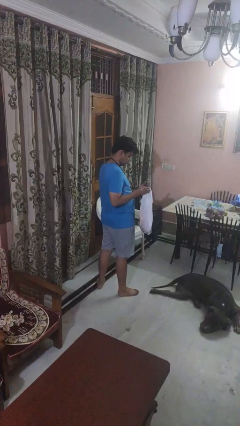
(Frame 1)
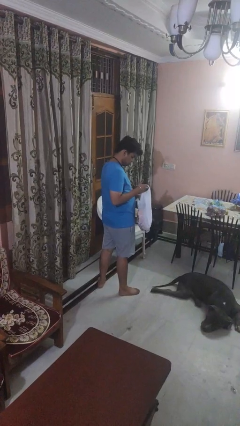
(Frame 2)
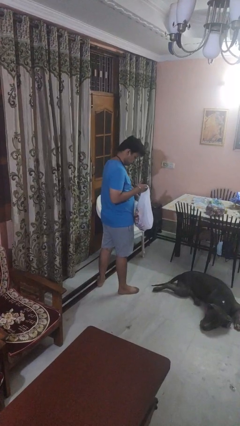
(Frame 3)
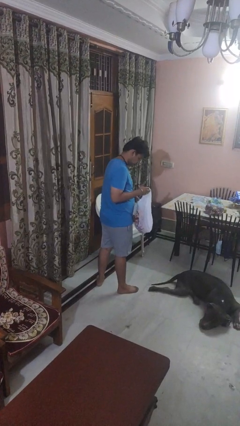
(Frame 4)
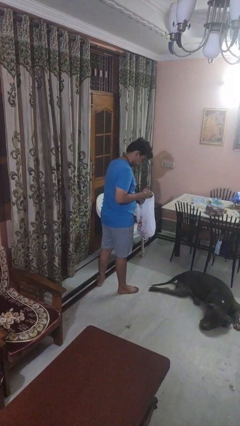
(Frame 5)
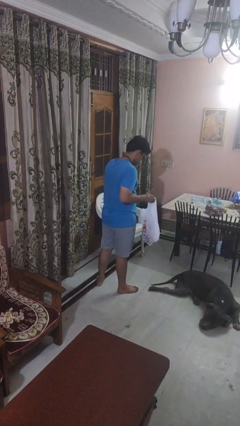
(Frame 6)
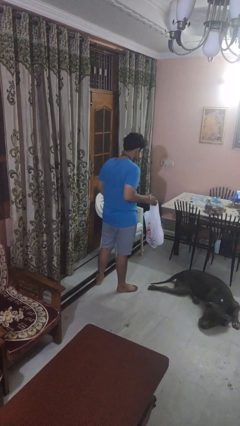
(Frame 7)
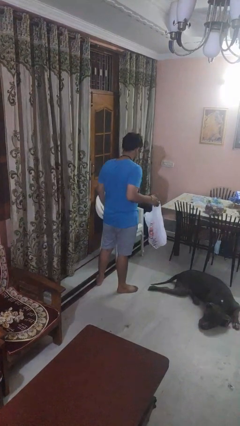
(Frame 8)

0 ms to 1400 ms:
person puts object into bag

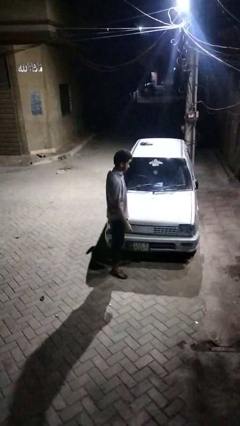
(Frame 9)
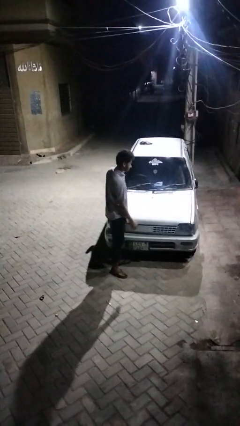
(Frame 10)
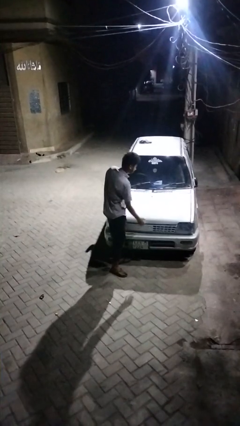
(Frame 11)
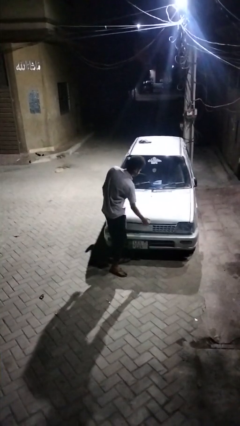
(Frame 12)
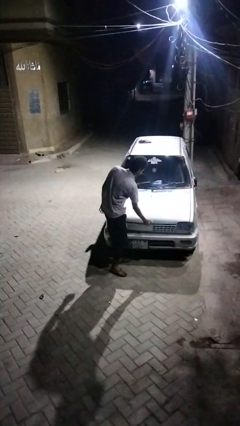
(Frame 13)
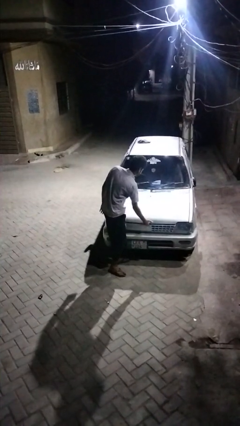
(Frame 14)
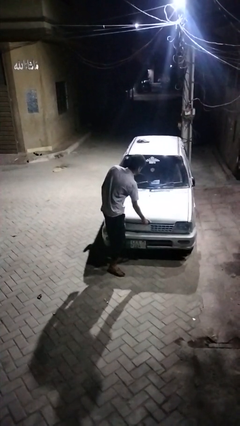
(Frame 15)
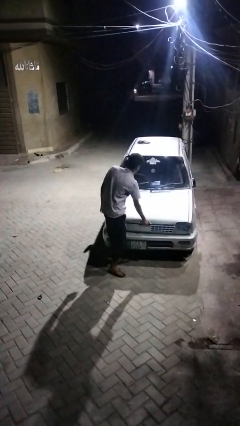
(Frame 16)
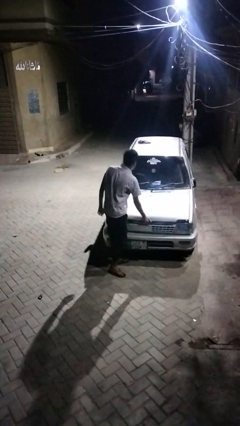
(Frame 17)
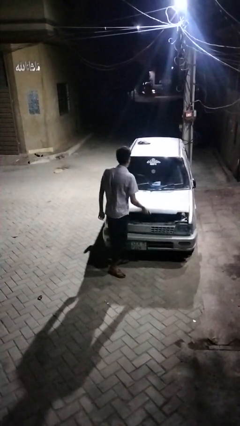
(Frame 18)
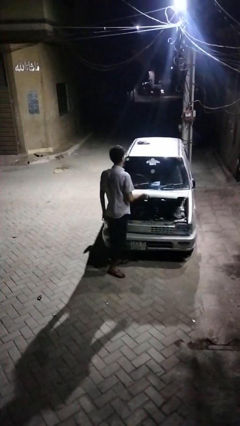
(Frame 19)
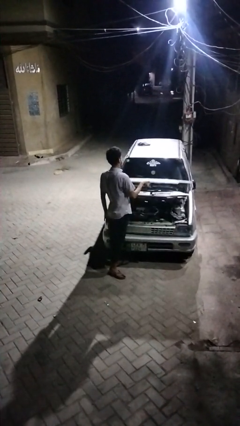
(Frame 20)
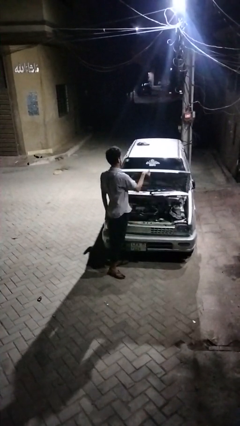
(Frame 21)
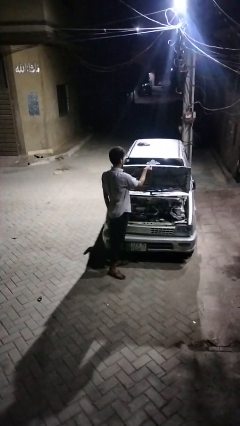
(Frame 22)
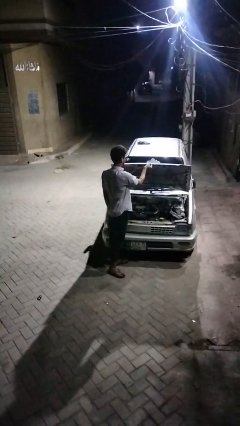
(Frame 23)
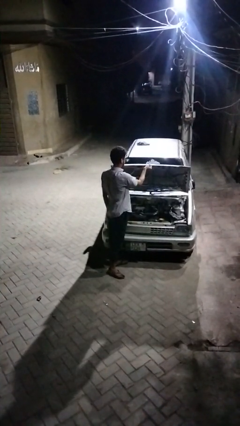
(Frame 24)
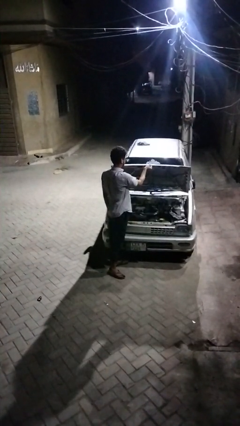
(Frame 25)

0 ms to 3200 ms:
person opens car hood

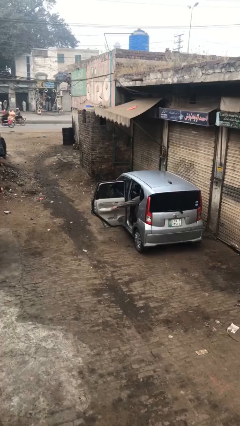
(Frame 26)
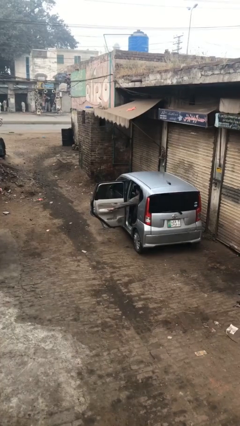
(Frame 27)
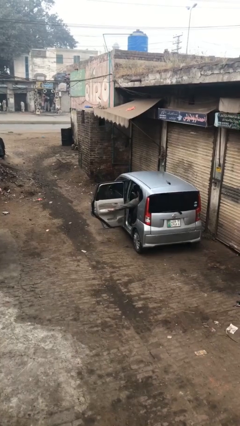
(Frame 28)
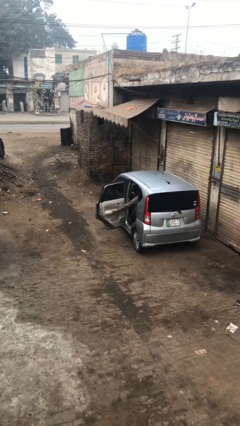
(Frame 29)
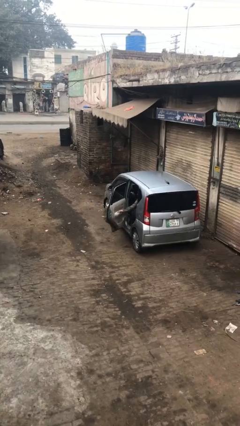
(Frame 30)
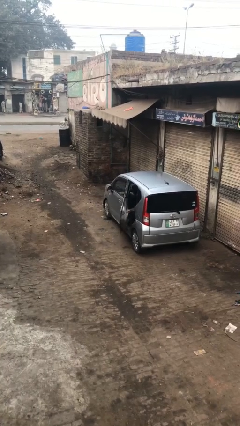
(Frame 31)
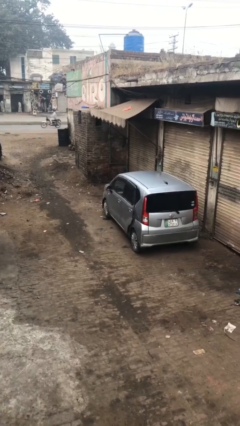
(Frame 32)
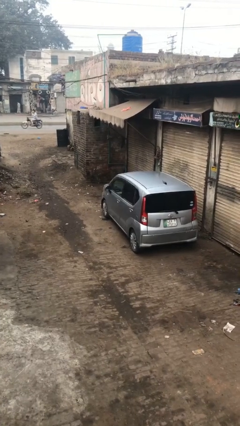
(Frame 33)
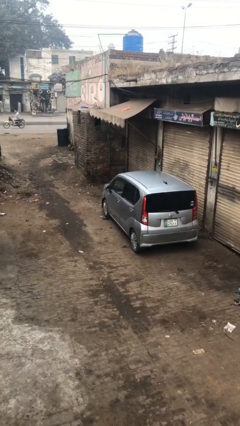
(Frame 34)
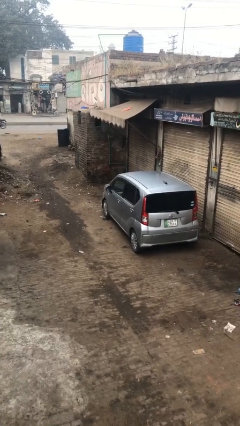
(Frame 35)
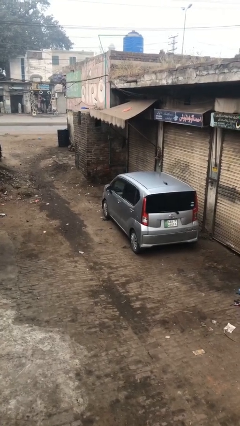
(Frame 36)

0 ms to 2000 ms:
person closes car door

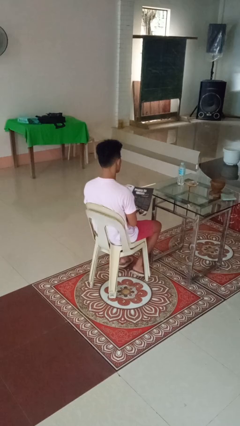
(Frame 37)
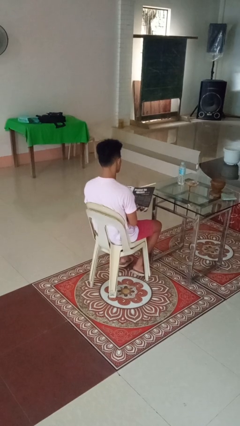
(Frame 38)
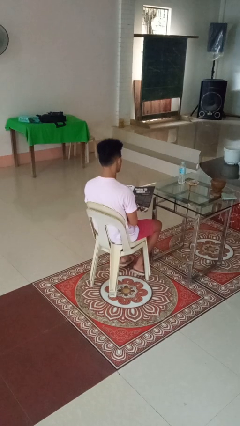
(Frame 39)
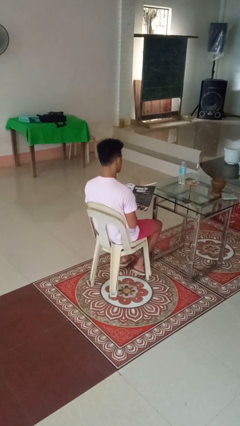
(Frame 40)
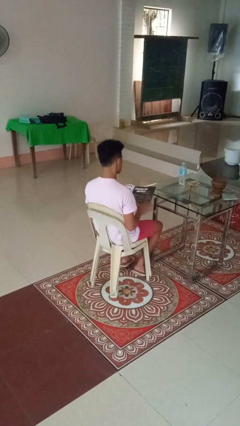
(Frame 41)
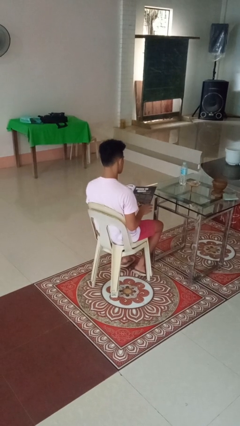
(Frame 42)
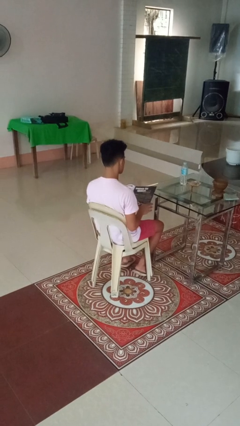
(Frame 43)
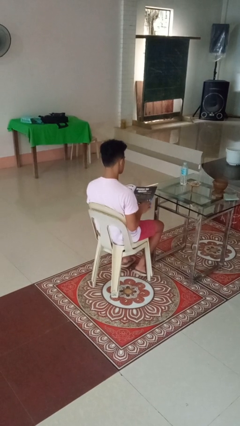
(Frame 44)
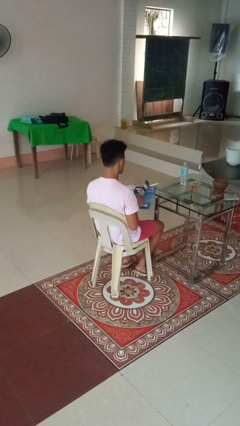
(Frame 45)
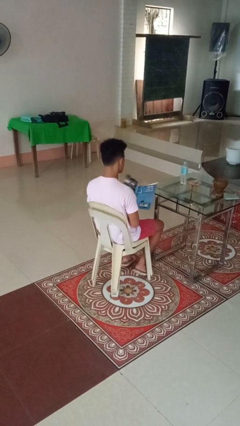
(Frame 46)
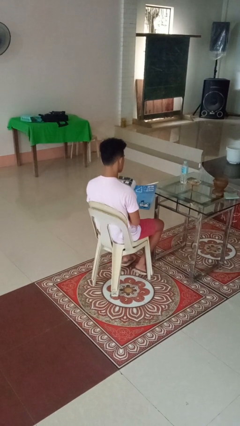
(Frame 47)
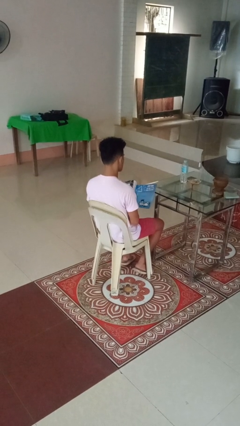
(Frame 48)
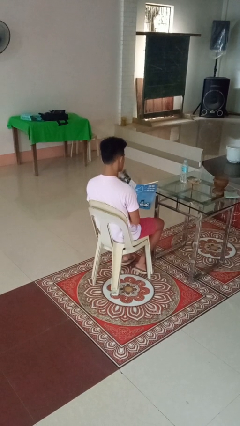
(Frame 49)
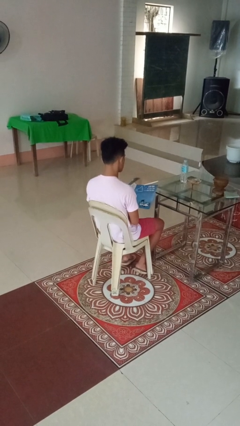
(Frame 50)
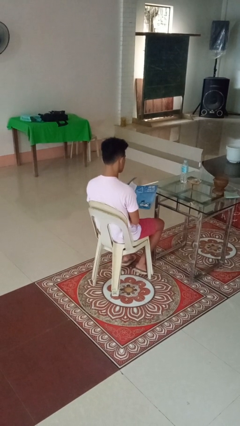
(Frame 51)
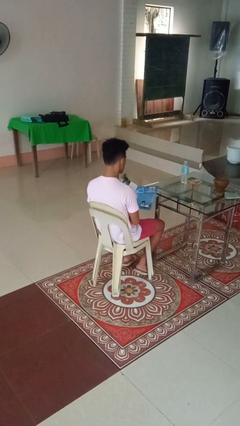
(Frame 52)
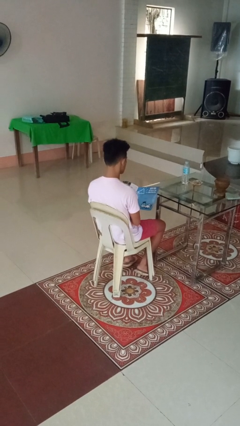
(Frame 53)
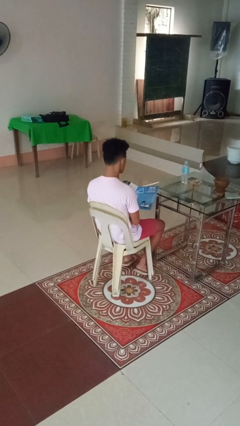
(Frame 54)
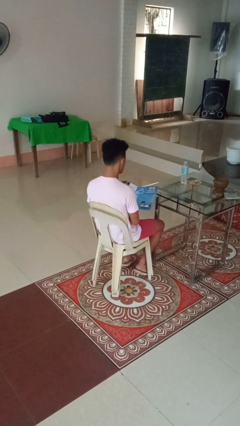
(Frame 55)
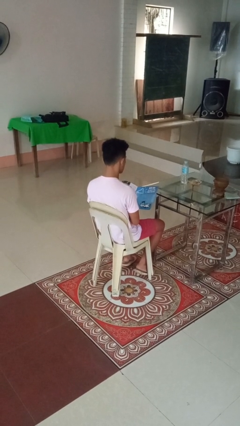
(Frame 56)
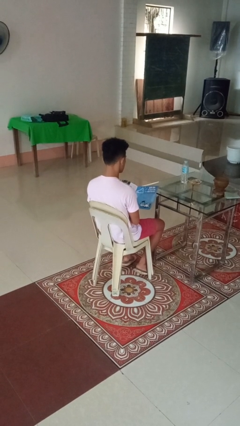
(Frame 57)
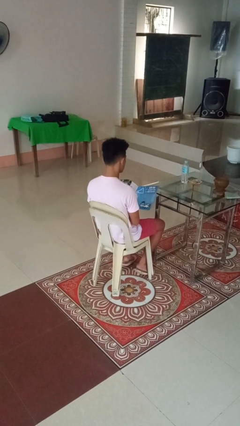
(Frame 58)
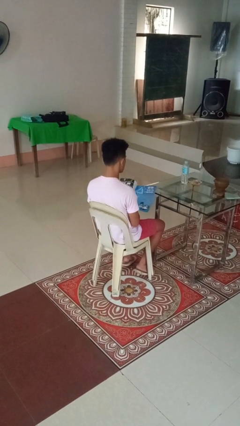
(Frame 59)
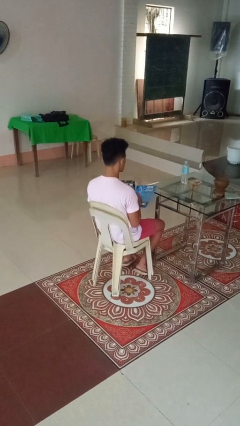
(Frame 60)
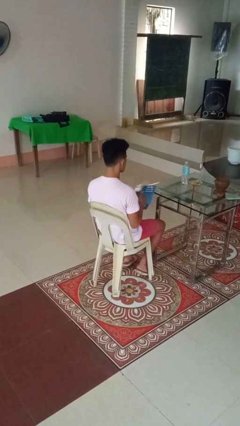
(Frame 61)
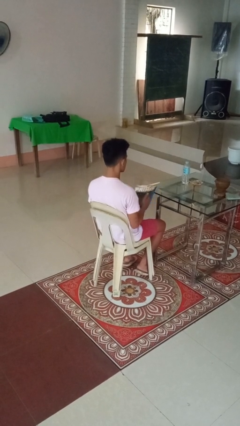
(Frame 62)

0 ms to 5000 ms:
person reads magazine

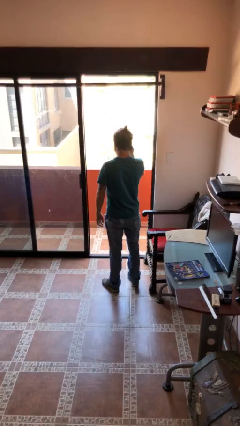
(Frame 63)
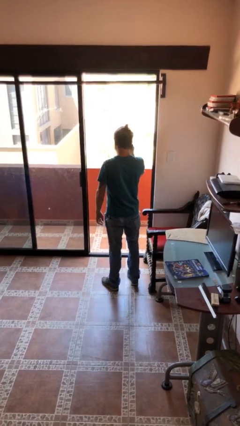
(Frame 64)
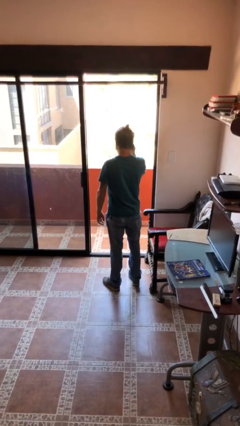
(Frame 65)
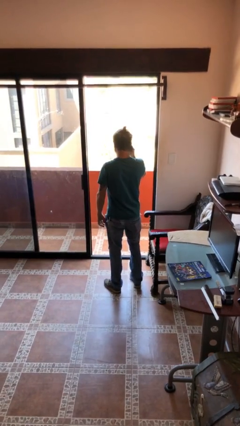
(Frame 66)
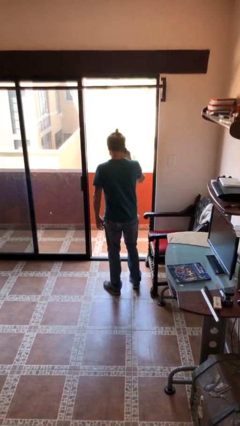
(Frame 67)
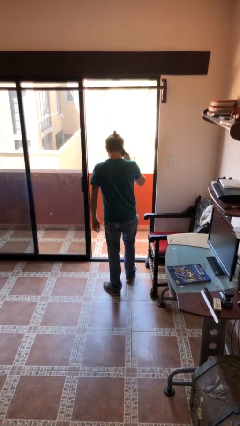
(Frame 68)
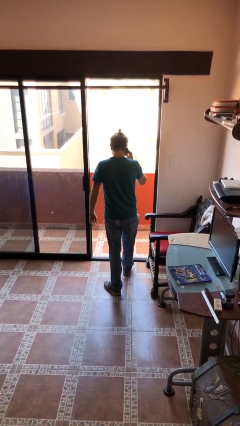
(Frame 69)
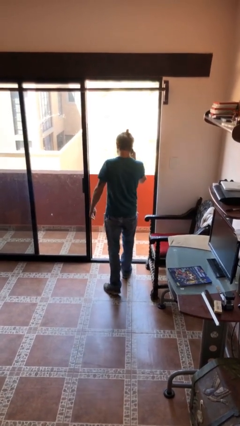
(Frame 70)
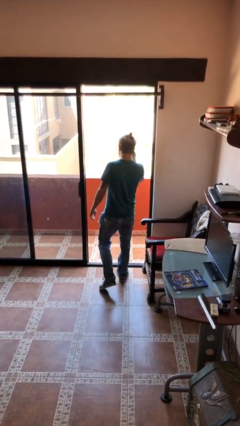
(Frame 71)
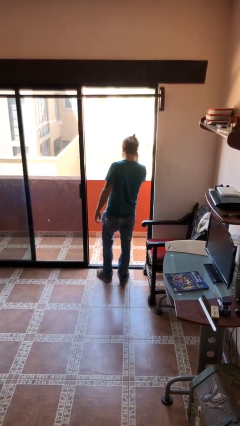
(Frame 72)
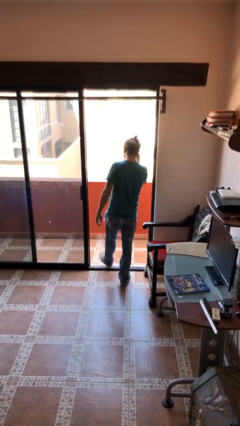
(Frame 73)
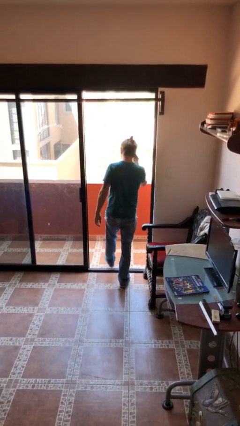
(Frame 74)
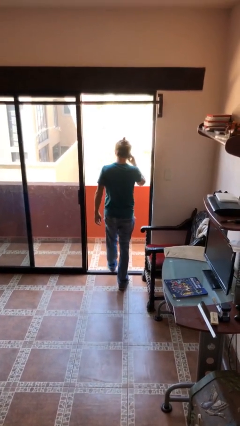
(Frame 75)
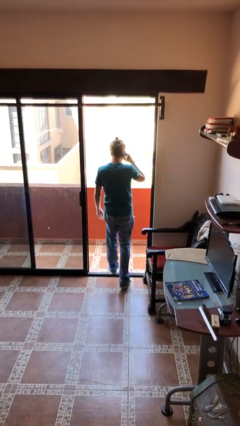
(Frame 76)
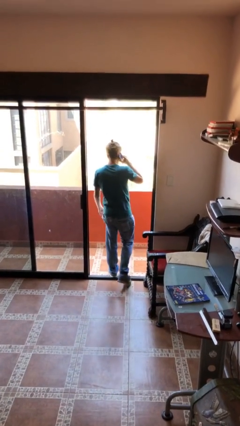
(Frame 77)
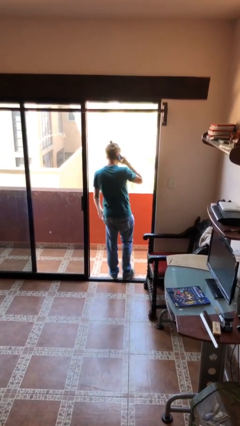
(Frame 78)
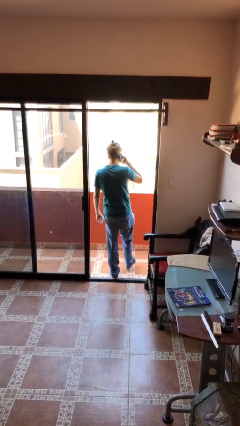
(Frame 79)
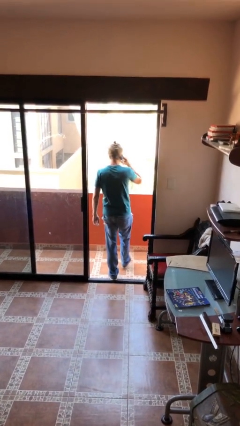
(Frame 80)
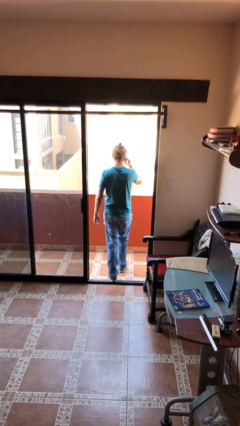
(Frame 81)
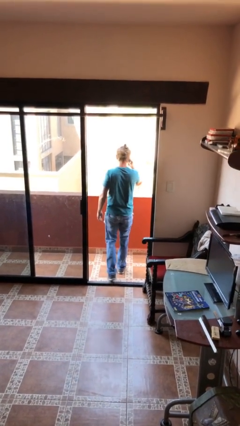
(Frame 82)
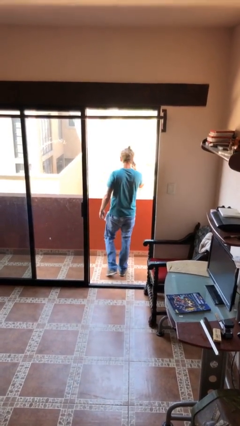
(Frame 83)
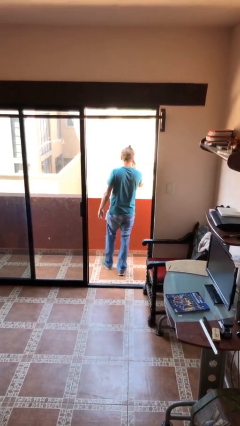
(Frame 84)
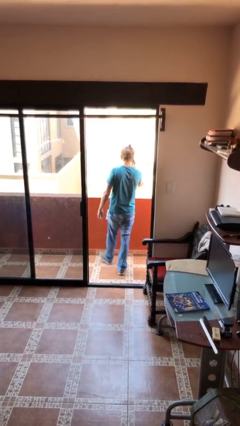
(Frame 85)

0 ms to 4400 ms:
person exits scene through structure

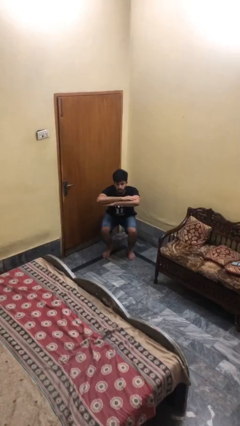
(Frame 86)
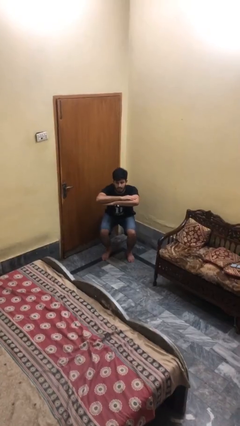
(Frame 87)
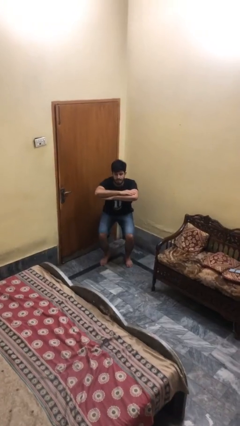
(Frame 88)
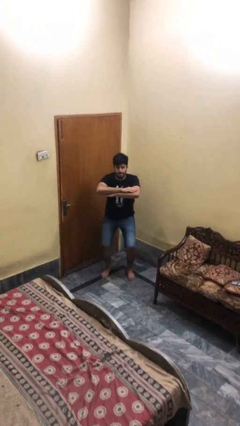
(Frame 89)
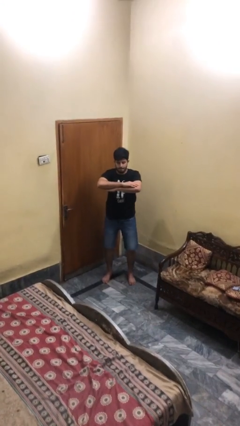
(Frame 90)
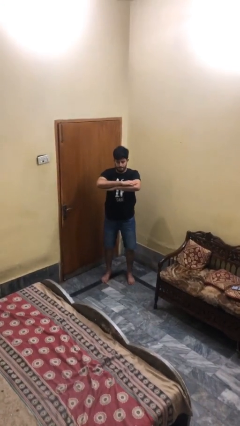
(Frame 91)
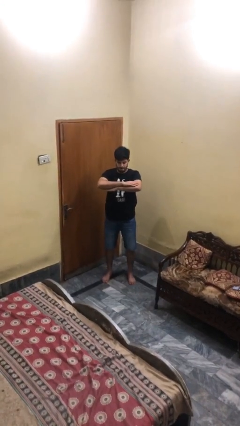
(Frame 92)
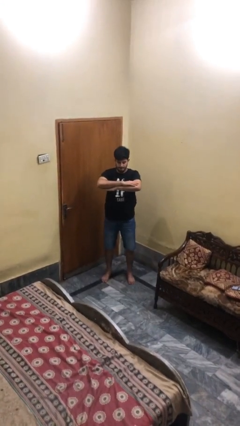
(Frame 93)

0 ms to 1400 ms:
person stands up

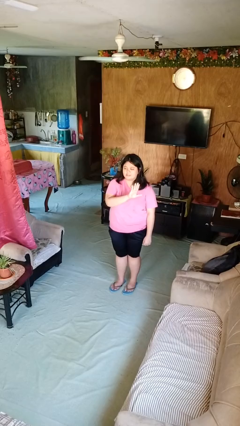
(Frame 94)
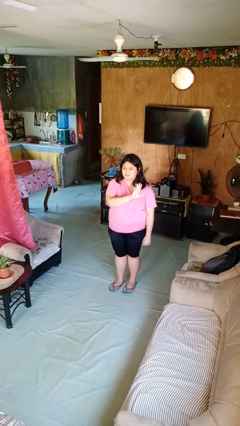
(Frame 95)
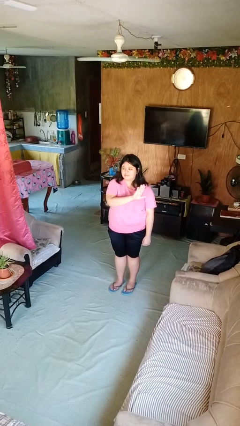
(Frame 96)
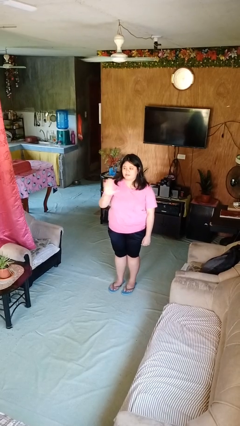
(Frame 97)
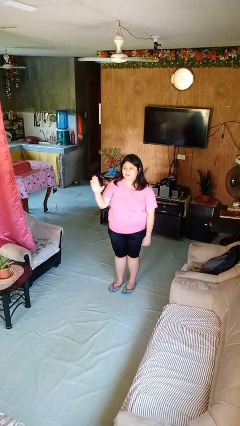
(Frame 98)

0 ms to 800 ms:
person gestures swipe right
